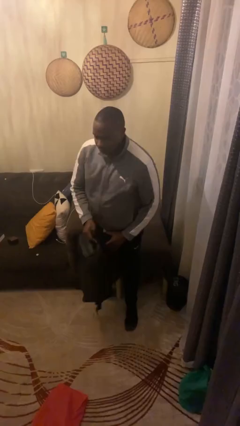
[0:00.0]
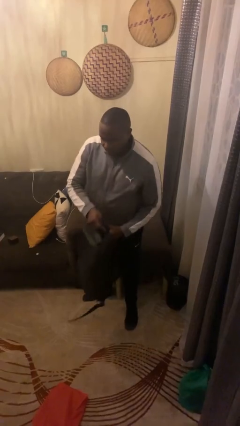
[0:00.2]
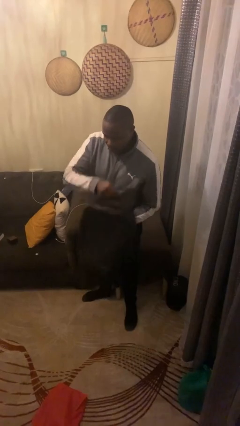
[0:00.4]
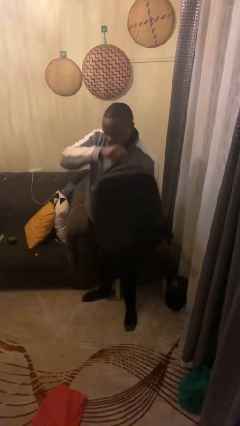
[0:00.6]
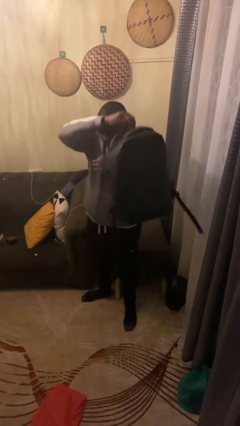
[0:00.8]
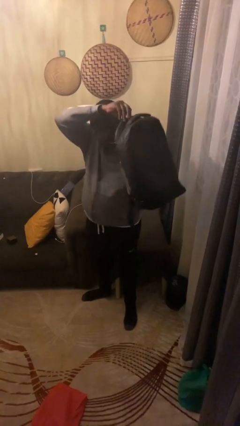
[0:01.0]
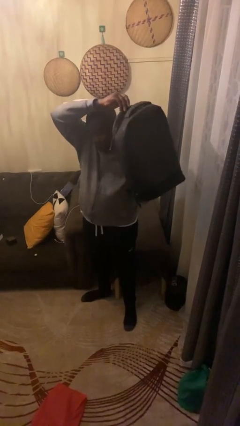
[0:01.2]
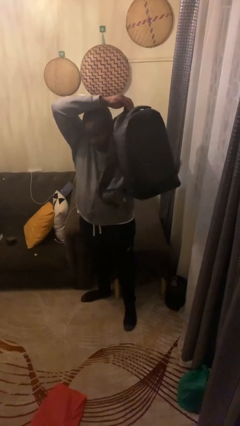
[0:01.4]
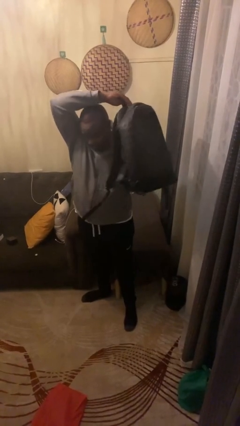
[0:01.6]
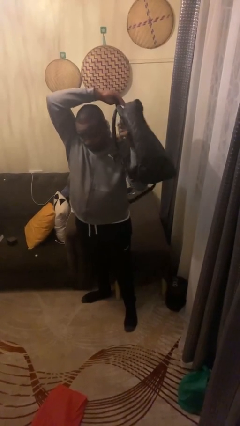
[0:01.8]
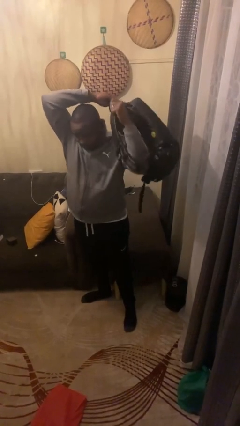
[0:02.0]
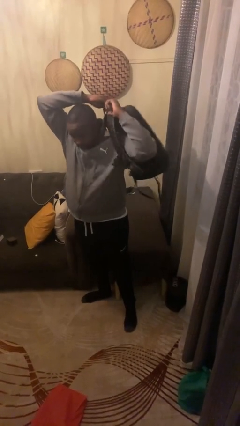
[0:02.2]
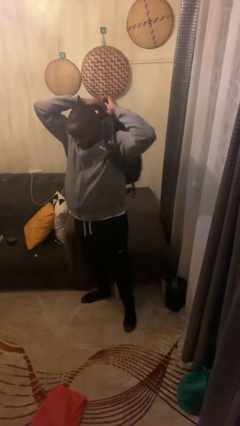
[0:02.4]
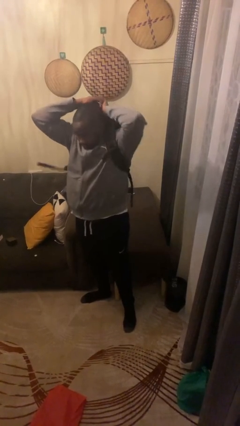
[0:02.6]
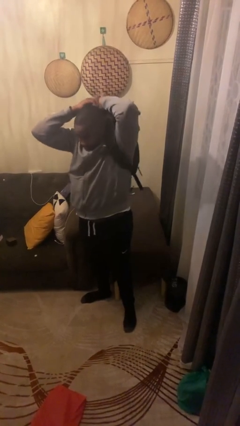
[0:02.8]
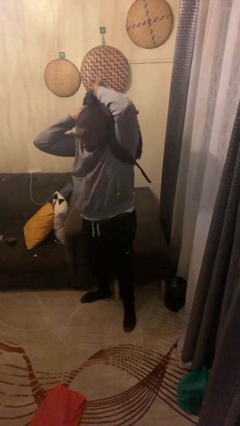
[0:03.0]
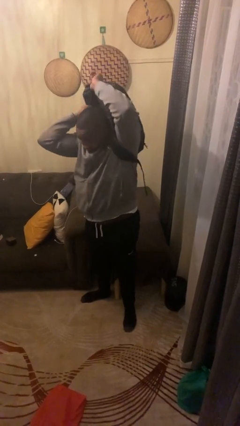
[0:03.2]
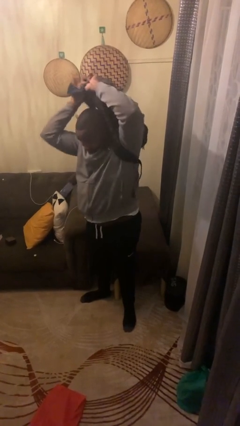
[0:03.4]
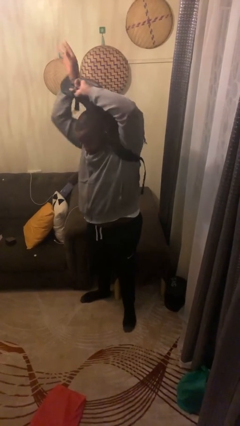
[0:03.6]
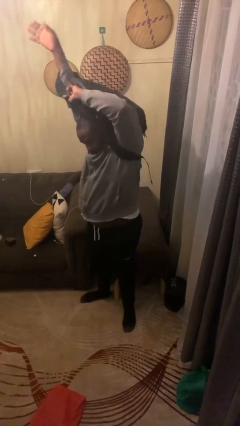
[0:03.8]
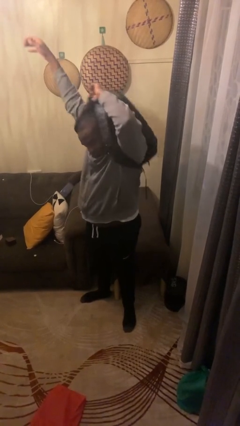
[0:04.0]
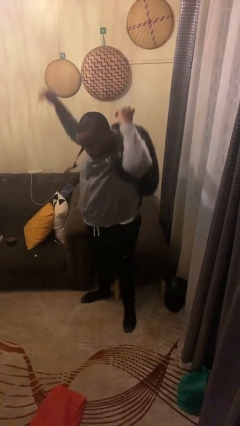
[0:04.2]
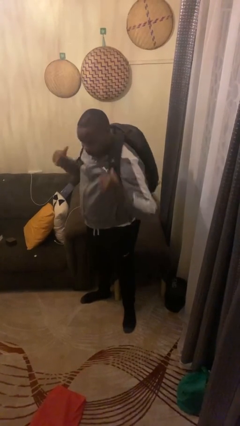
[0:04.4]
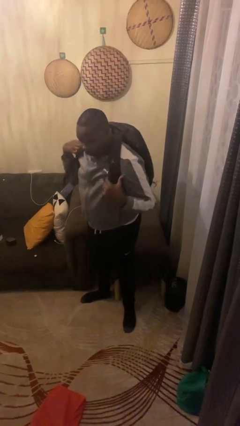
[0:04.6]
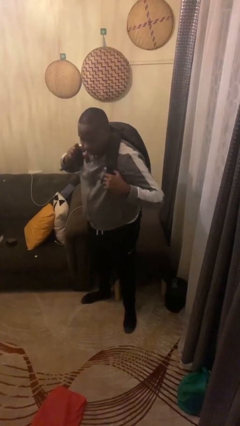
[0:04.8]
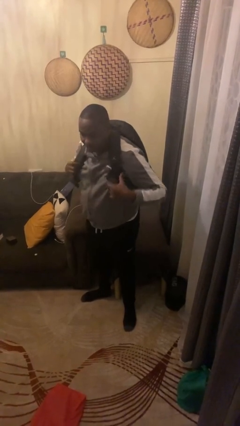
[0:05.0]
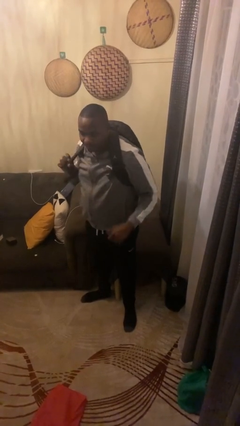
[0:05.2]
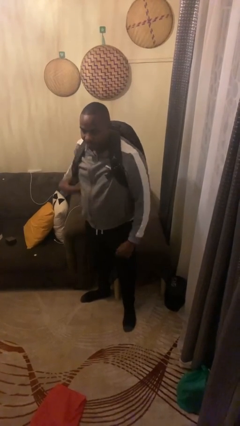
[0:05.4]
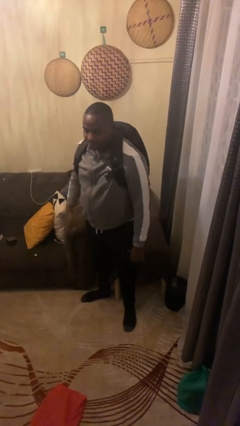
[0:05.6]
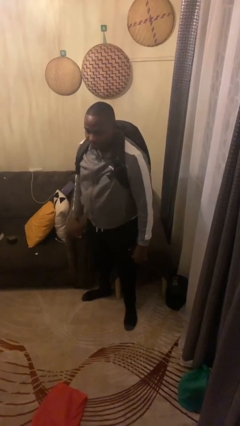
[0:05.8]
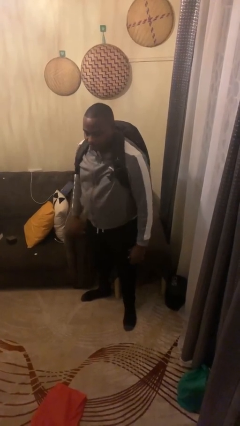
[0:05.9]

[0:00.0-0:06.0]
person puts on backpack

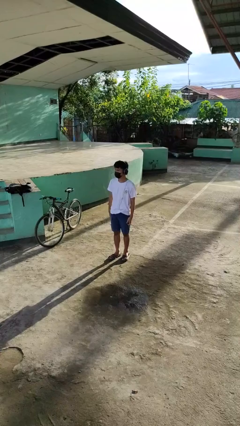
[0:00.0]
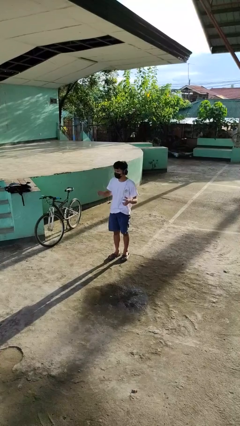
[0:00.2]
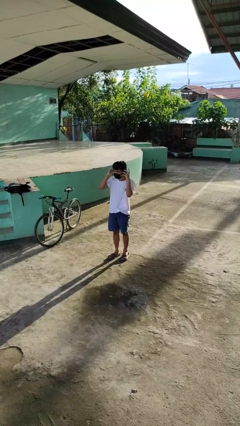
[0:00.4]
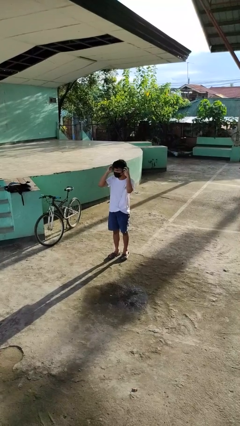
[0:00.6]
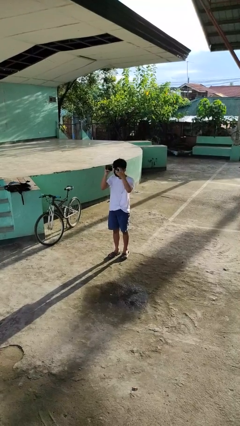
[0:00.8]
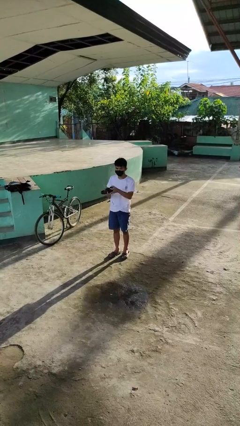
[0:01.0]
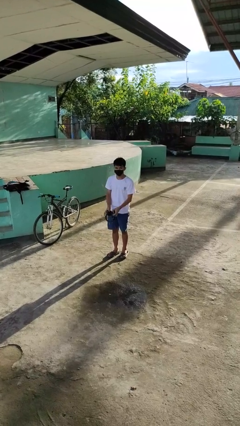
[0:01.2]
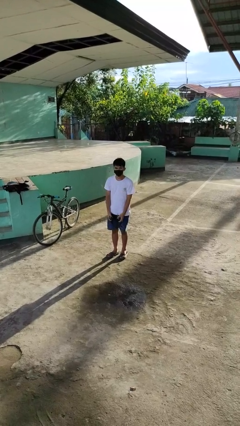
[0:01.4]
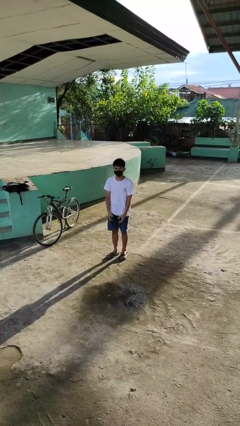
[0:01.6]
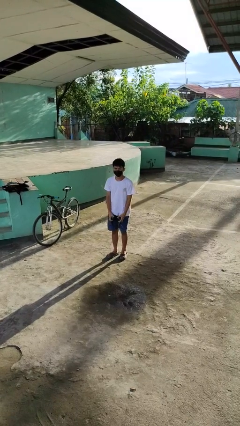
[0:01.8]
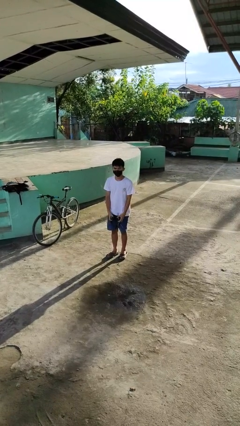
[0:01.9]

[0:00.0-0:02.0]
person takes off headphones

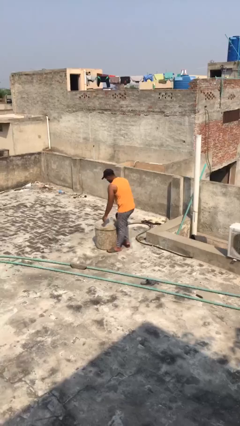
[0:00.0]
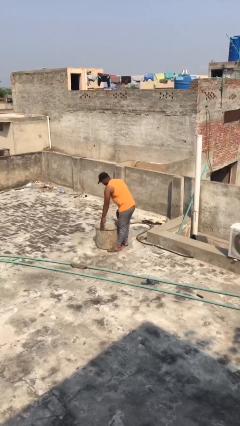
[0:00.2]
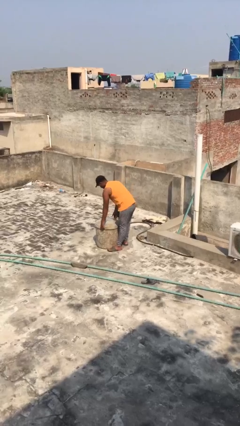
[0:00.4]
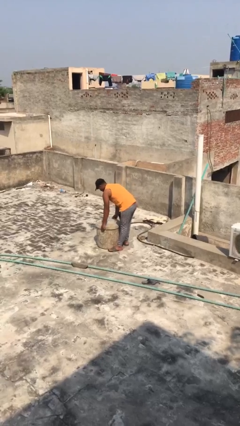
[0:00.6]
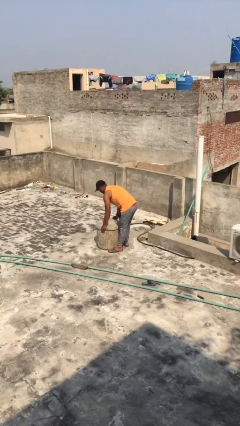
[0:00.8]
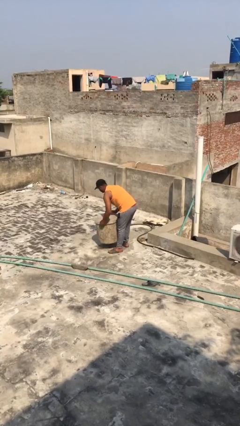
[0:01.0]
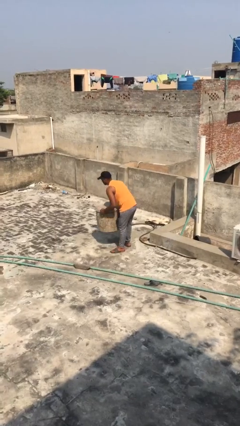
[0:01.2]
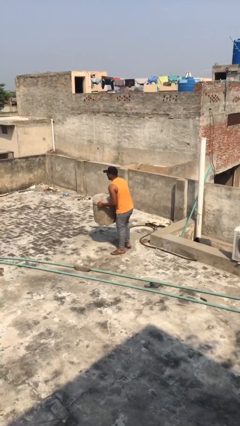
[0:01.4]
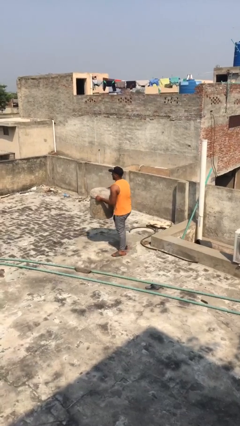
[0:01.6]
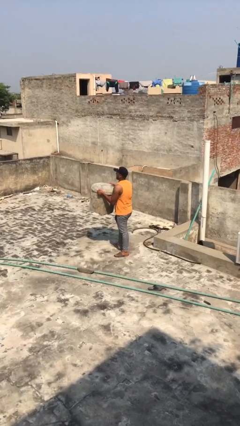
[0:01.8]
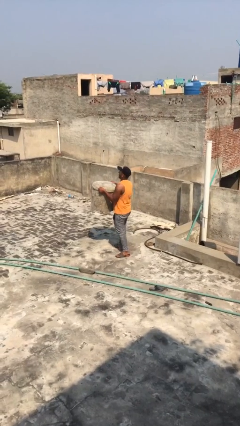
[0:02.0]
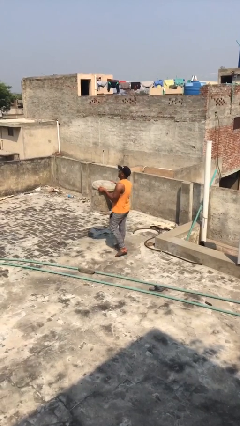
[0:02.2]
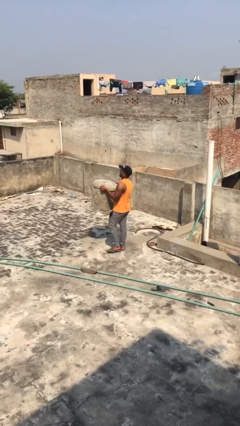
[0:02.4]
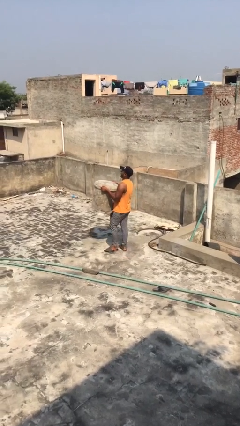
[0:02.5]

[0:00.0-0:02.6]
person picks up object from floor

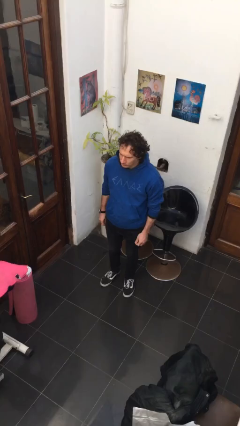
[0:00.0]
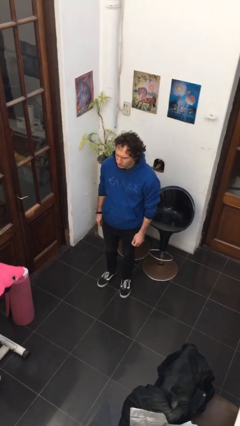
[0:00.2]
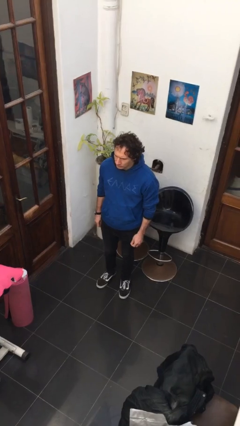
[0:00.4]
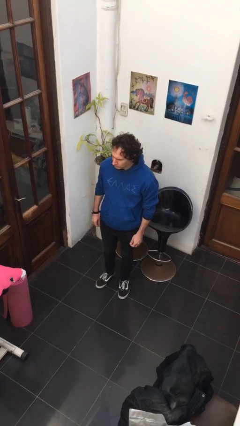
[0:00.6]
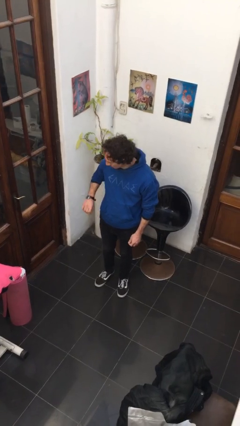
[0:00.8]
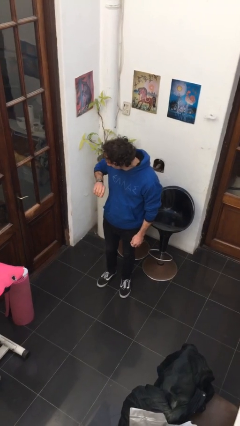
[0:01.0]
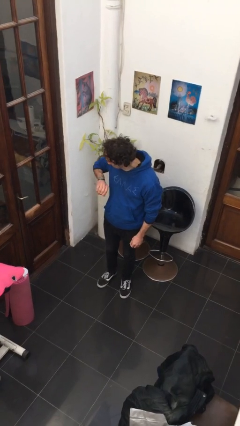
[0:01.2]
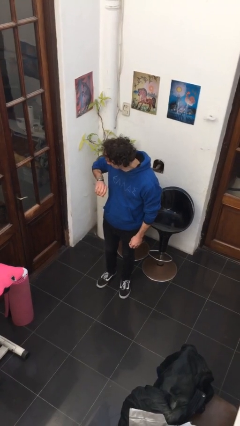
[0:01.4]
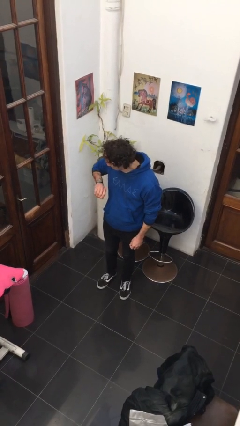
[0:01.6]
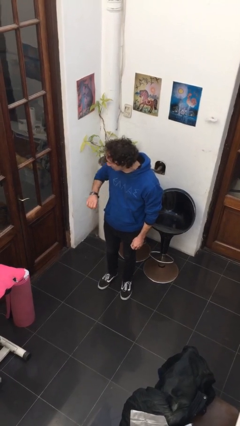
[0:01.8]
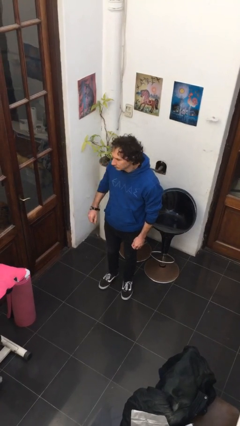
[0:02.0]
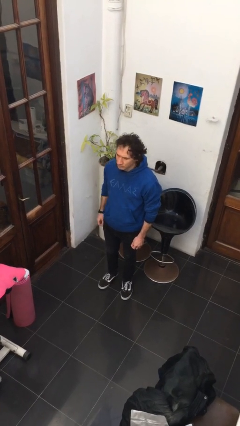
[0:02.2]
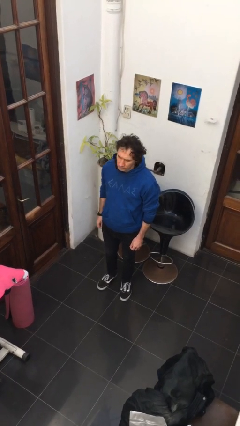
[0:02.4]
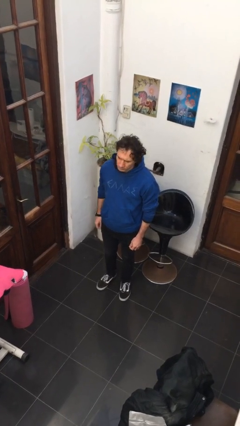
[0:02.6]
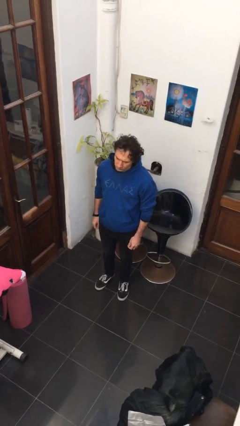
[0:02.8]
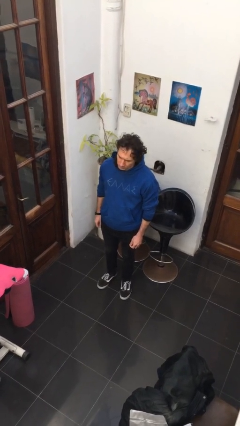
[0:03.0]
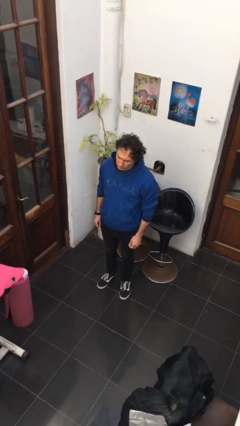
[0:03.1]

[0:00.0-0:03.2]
person looks at wristwatch

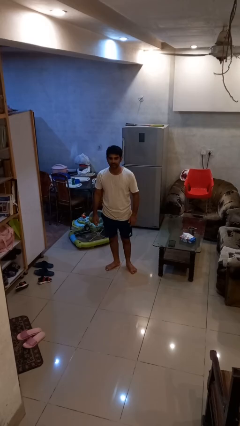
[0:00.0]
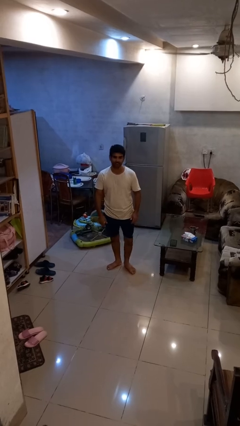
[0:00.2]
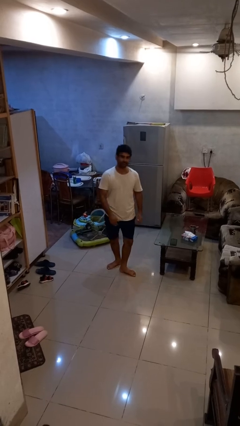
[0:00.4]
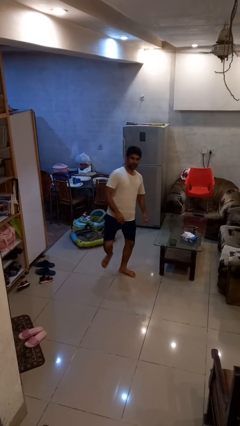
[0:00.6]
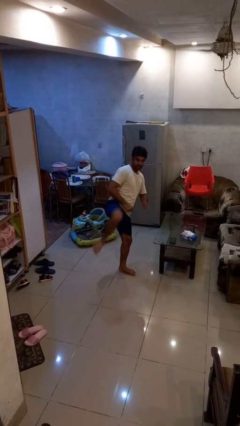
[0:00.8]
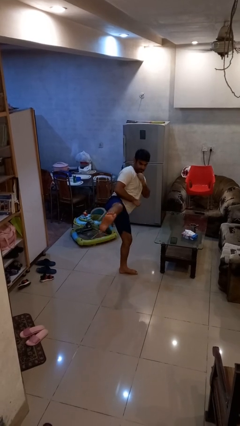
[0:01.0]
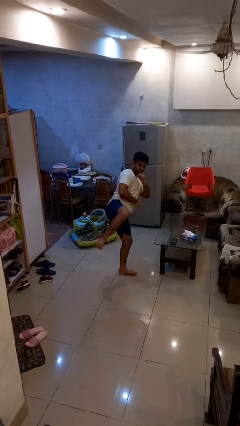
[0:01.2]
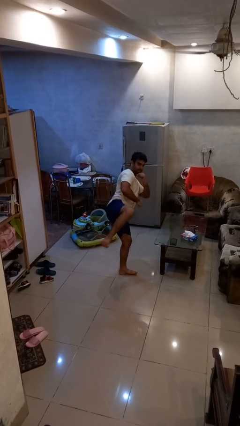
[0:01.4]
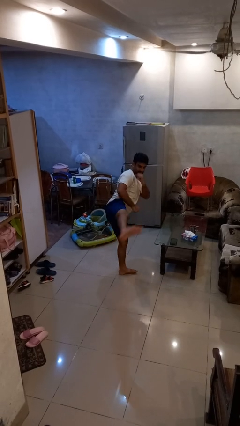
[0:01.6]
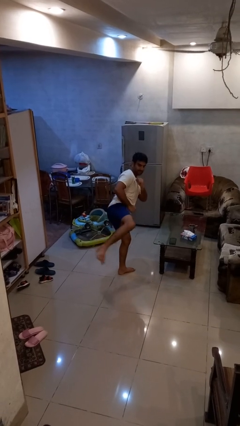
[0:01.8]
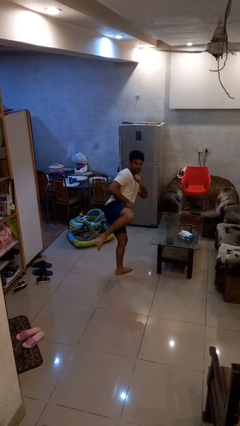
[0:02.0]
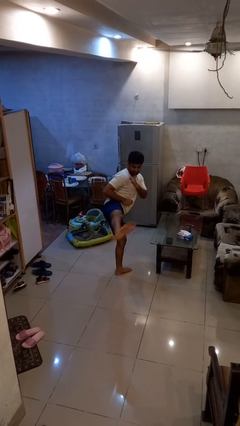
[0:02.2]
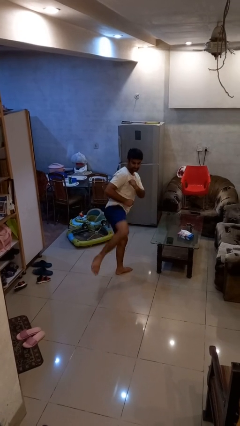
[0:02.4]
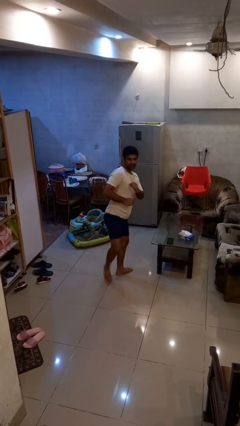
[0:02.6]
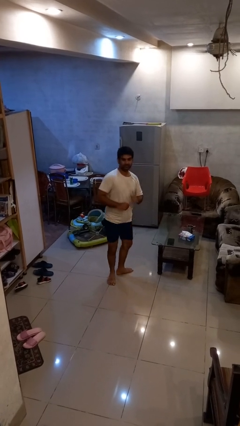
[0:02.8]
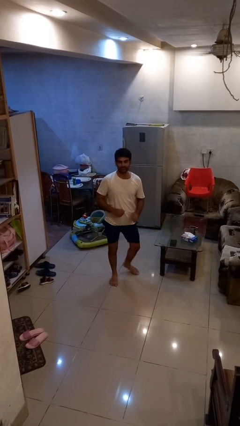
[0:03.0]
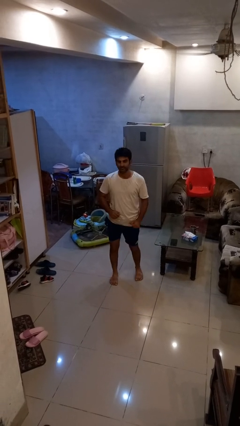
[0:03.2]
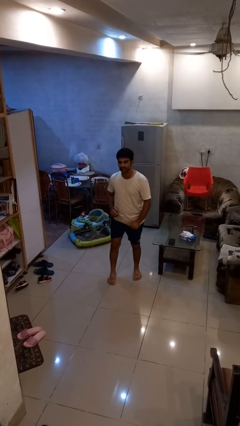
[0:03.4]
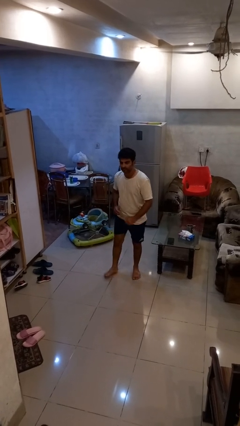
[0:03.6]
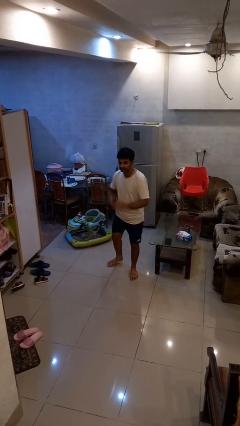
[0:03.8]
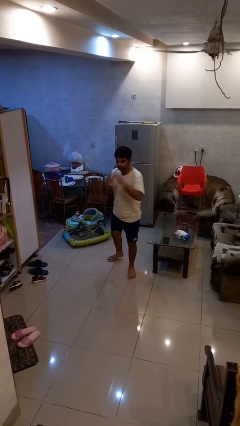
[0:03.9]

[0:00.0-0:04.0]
person karate kicks

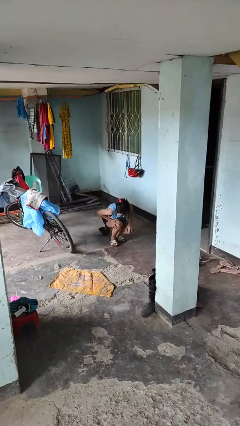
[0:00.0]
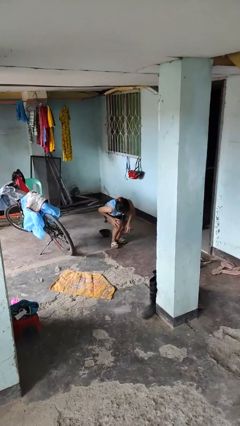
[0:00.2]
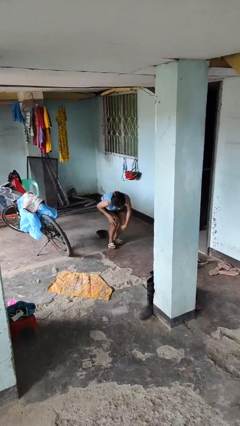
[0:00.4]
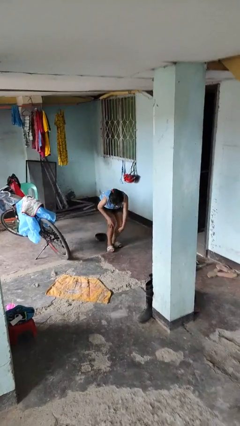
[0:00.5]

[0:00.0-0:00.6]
person lies down on floor
